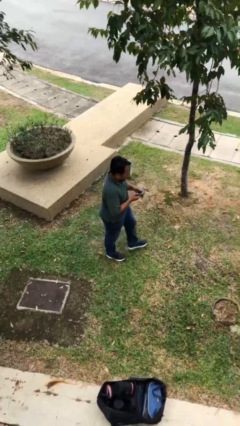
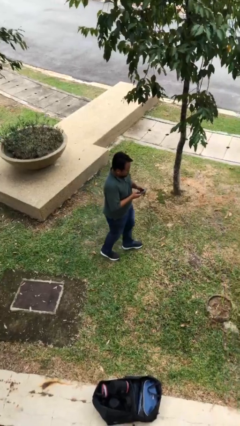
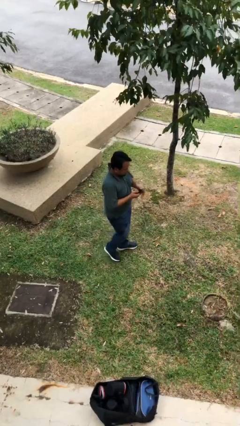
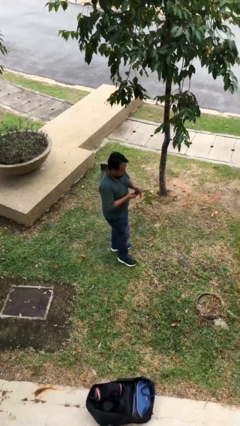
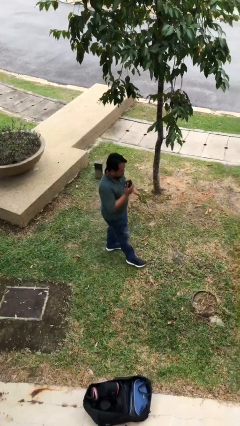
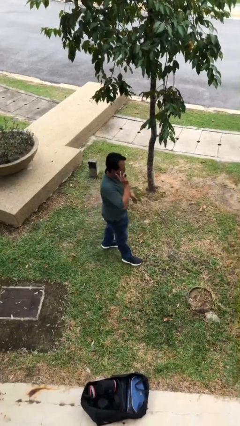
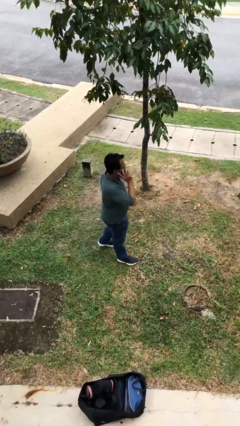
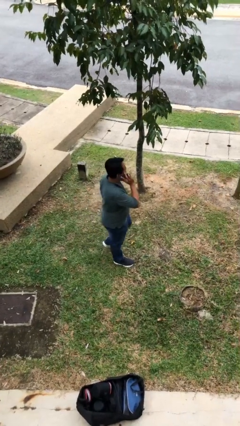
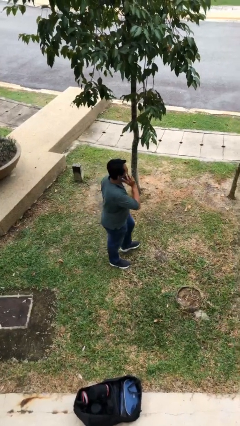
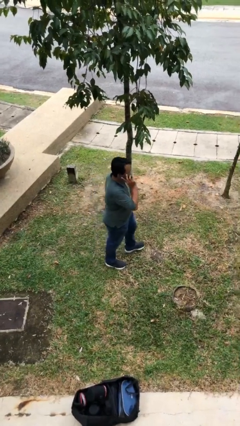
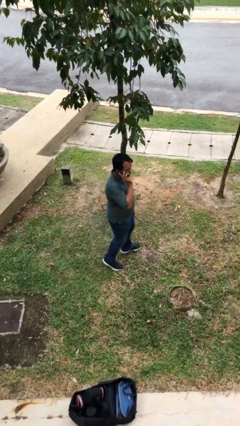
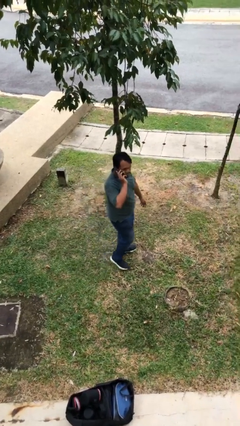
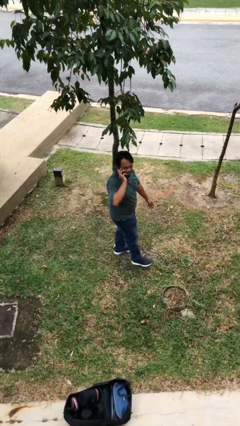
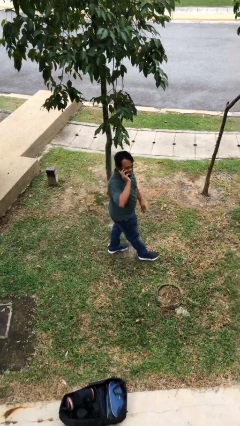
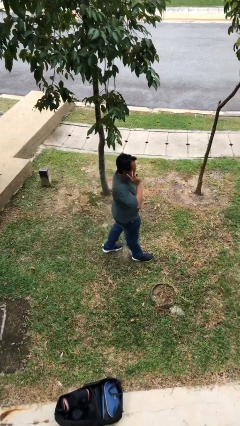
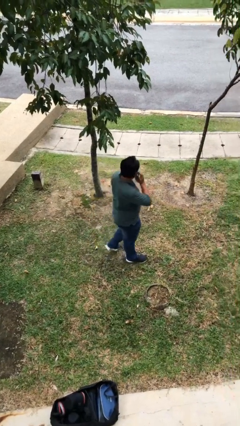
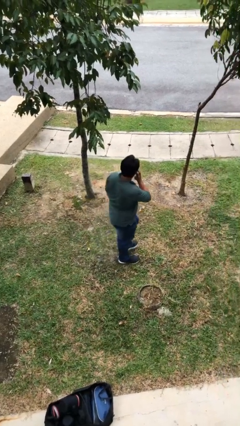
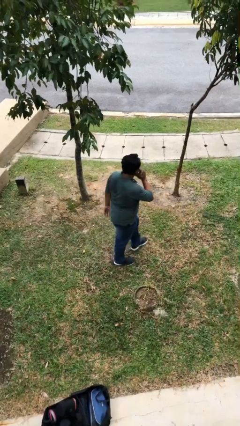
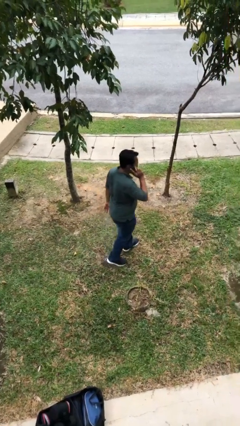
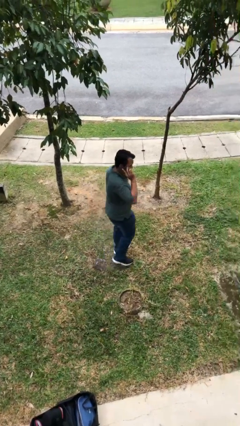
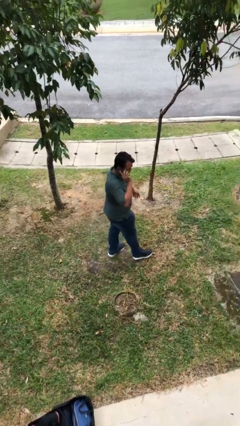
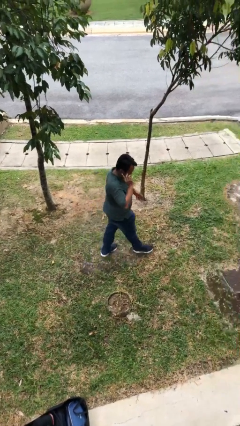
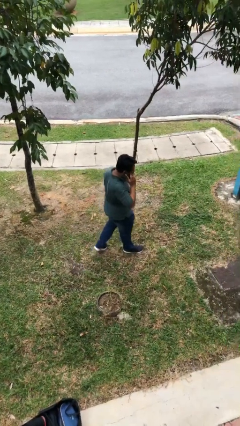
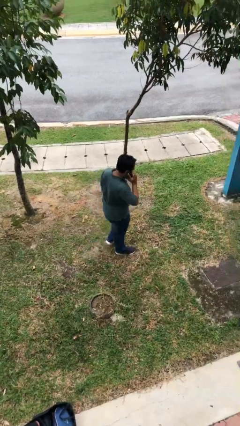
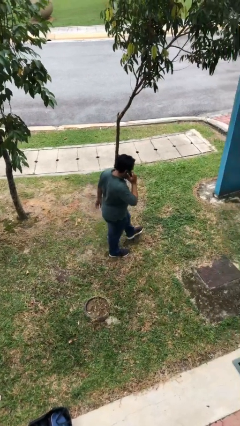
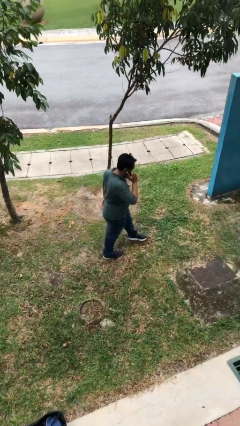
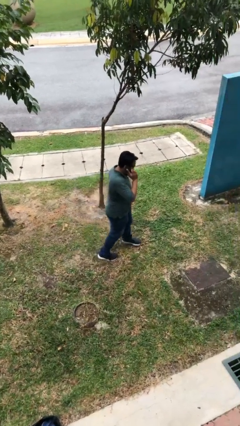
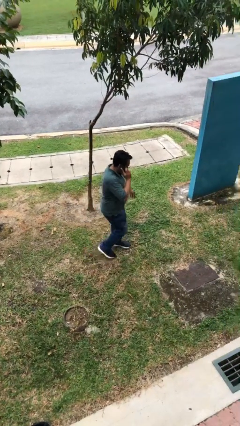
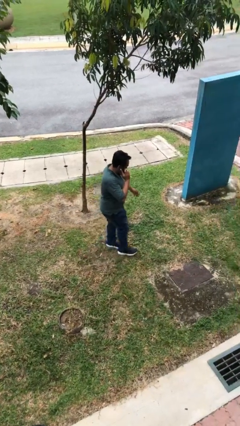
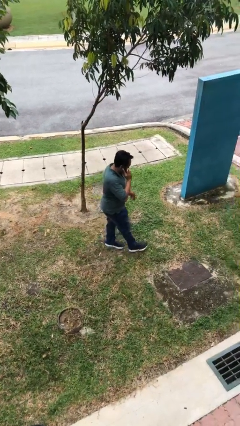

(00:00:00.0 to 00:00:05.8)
person talks on phone

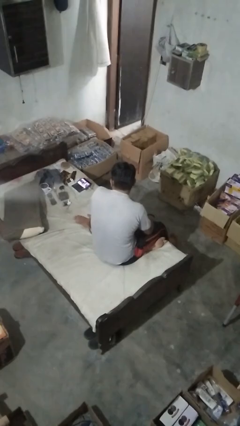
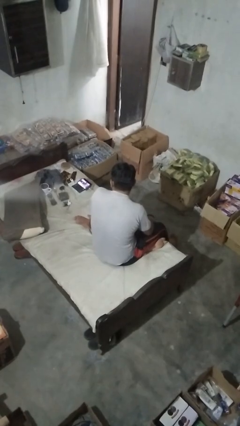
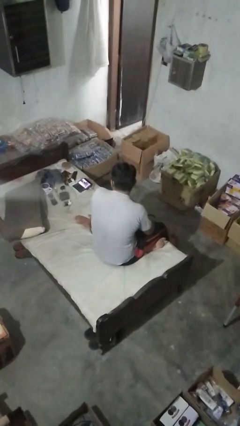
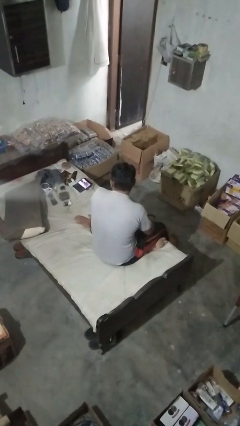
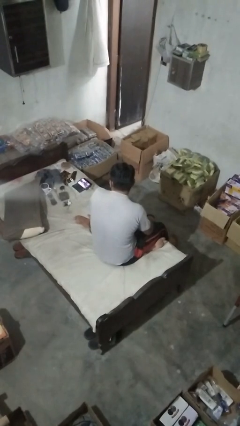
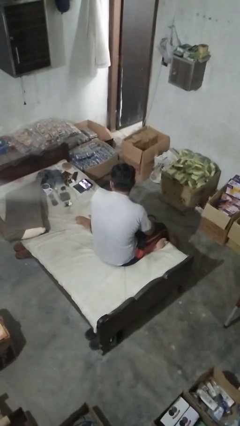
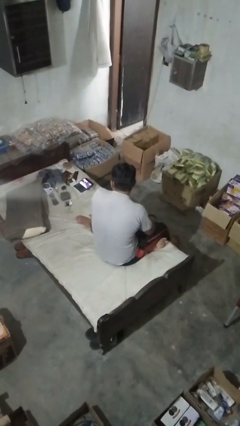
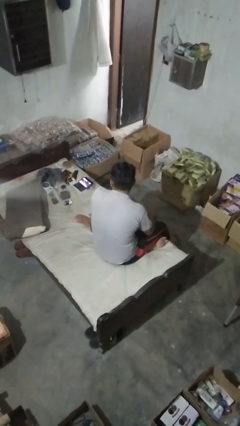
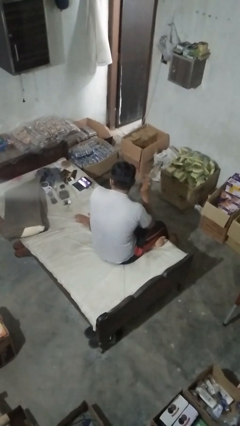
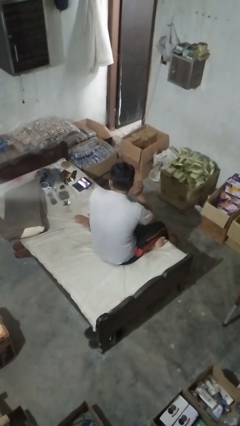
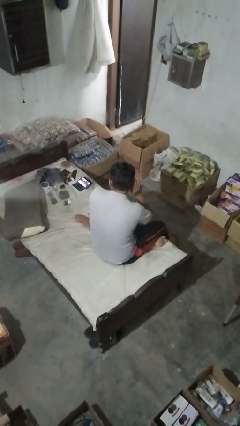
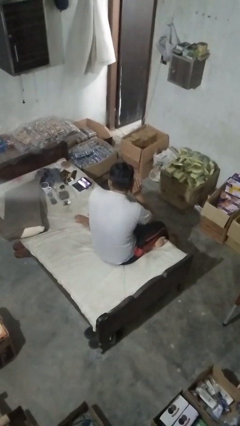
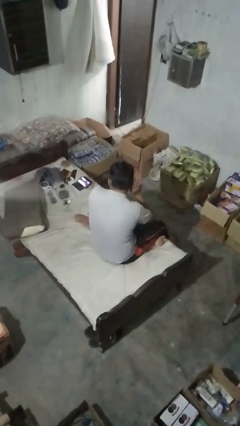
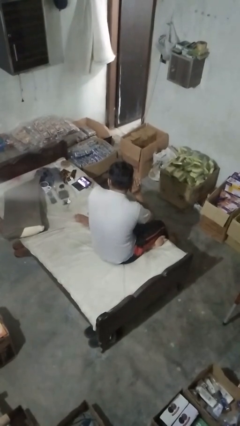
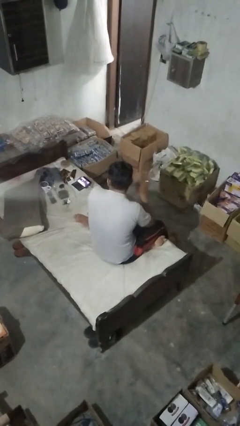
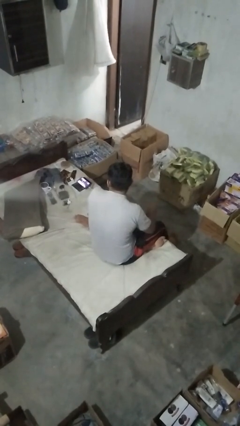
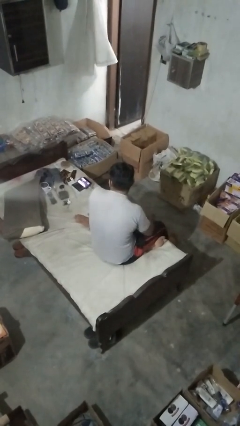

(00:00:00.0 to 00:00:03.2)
person gestures listen closely

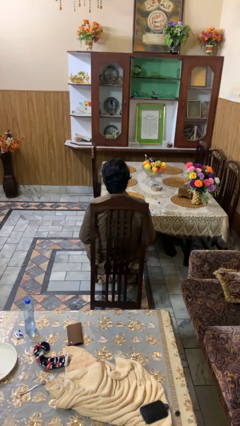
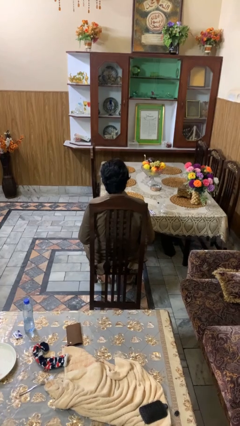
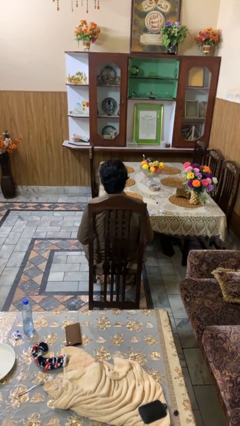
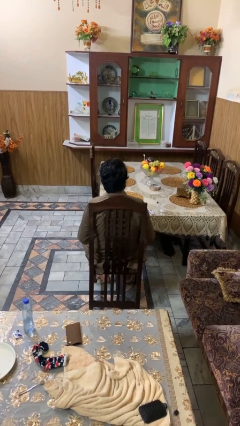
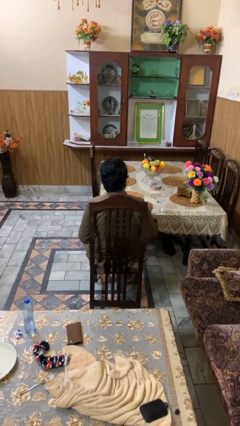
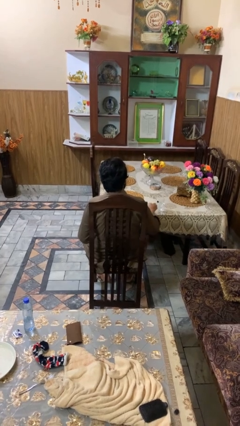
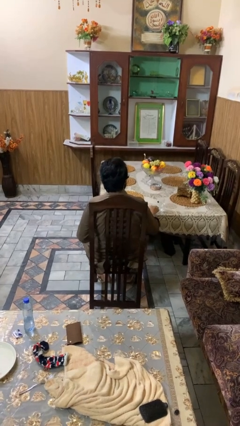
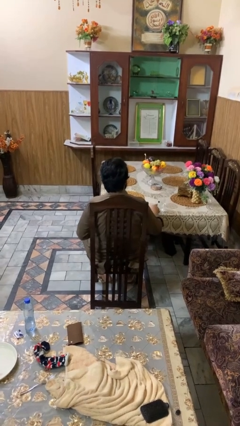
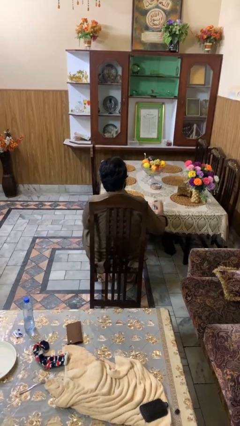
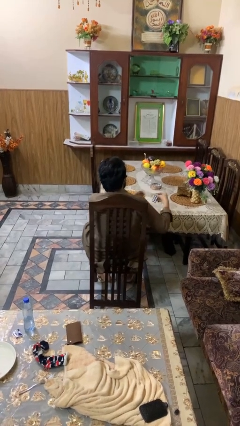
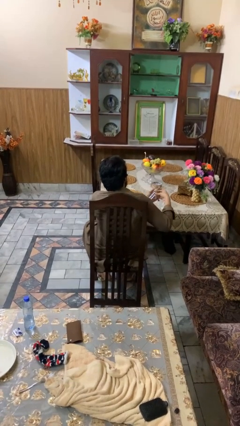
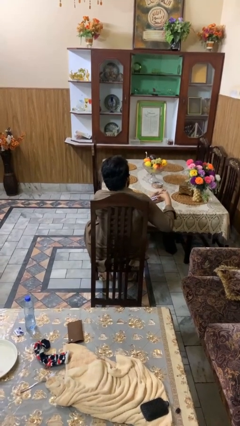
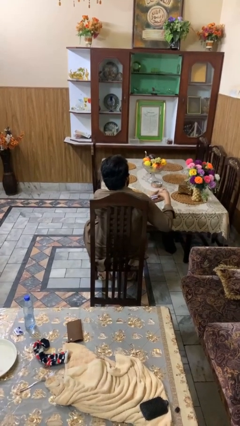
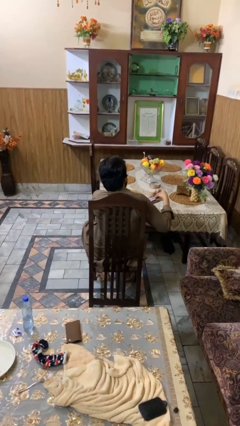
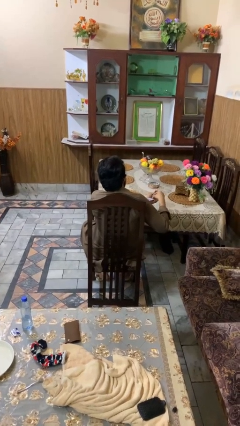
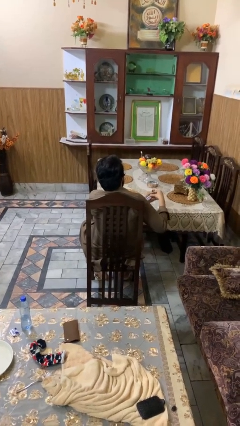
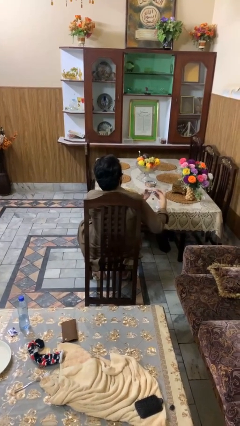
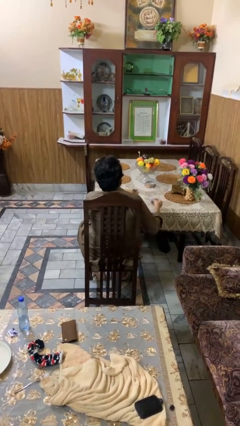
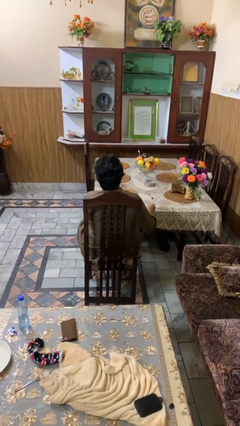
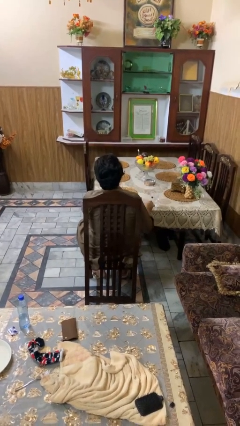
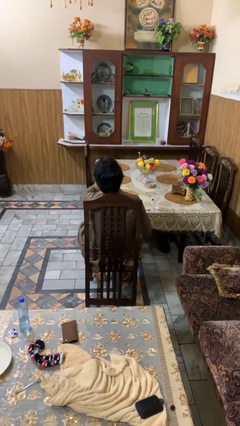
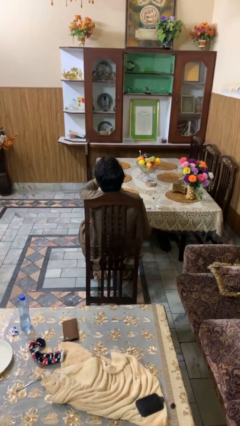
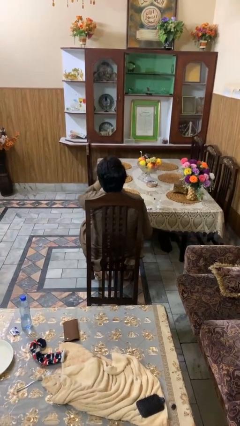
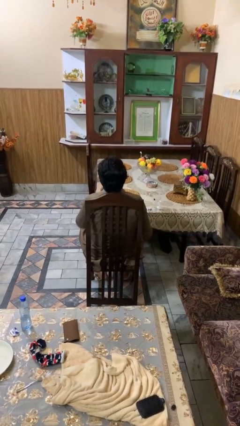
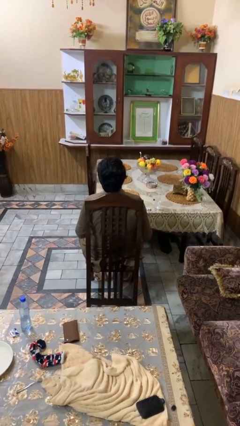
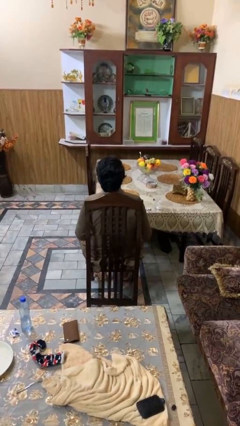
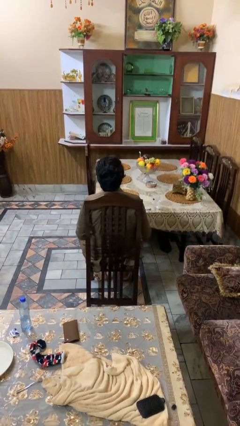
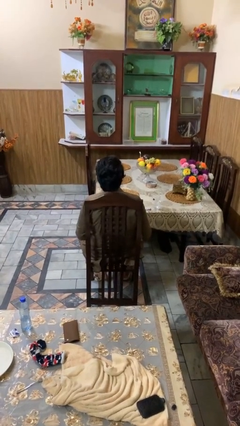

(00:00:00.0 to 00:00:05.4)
person takes medicine pills

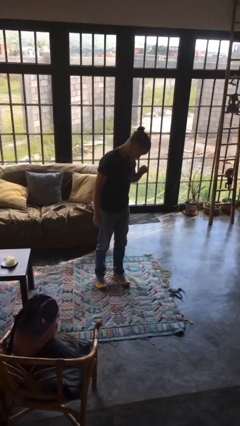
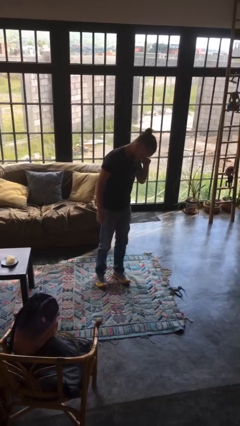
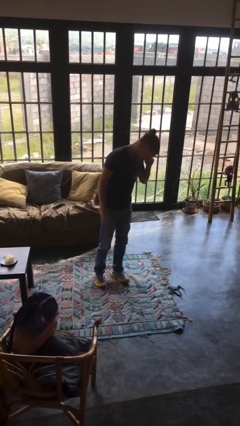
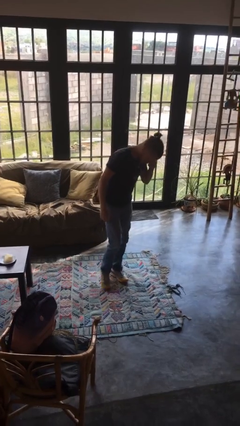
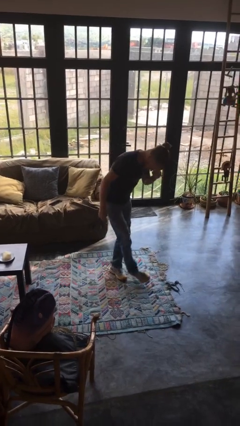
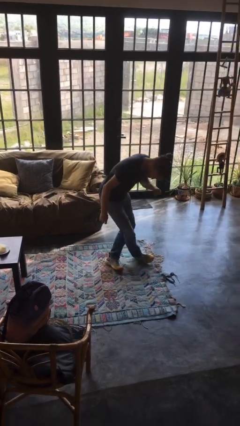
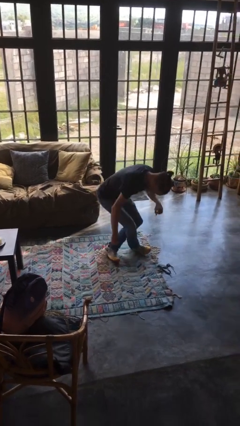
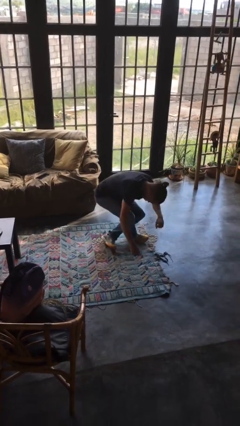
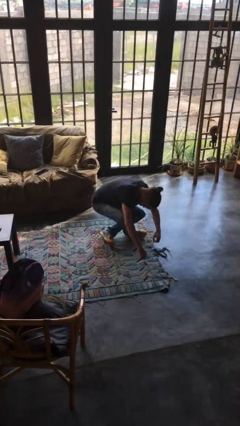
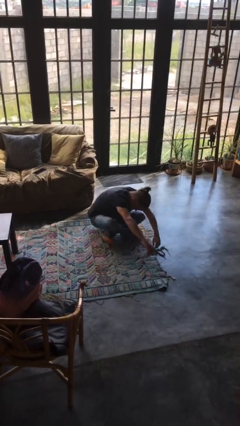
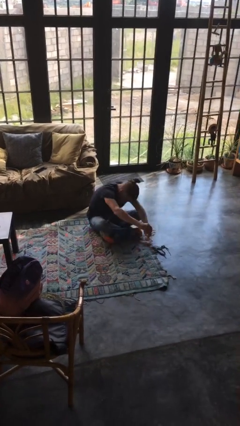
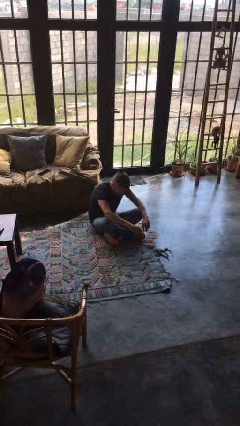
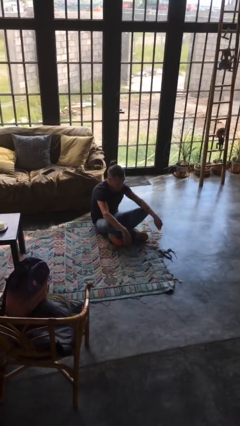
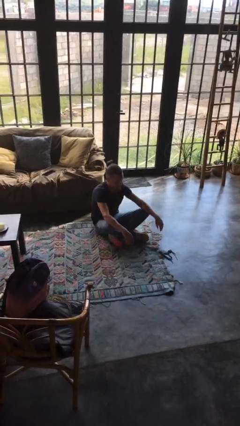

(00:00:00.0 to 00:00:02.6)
person sits crisscross

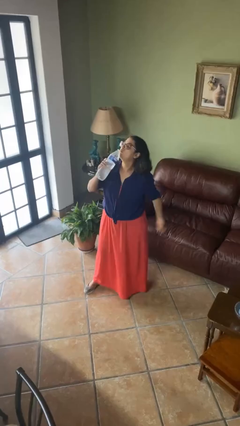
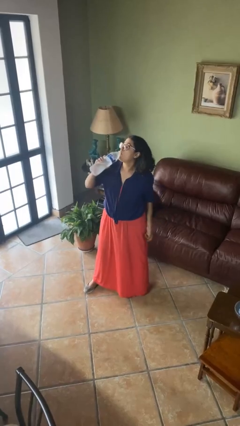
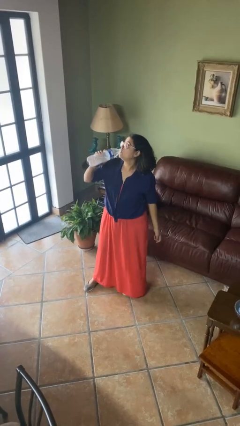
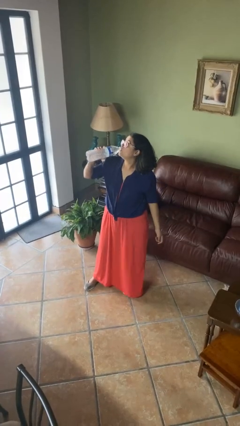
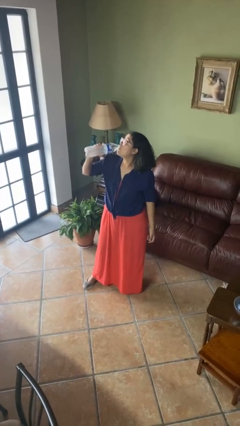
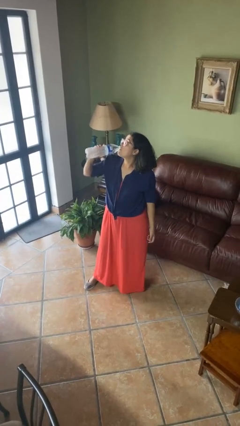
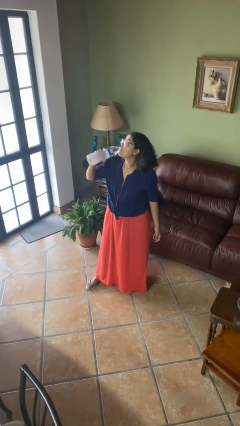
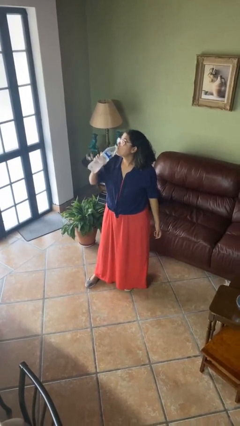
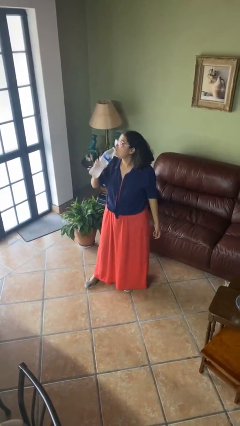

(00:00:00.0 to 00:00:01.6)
person drinks from bottle
